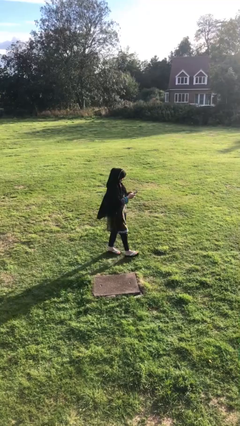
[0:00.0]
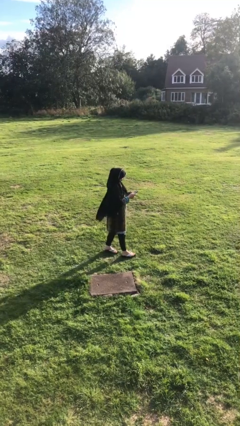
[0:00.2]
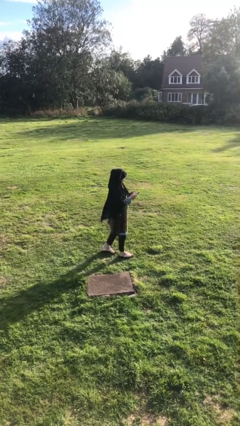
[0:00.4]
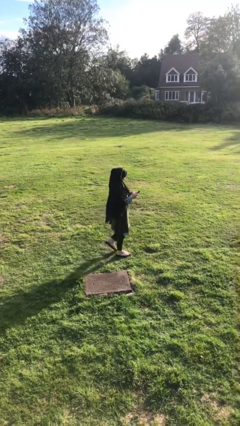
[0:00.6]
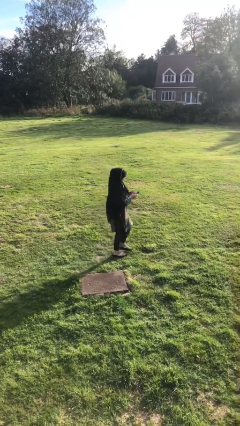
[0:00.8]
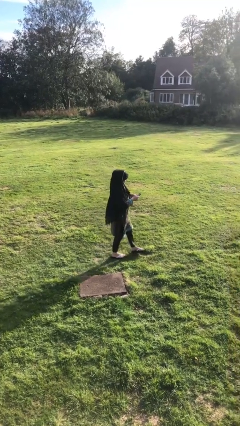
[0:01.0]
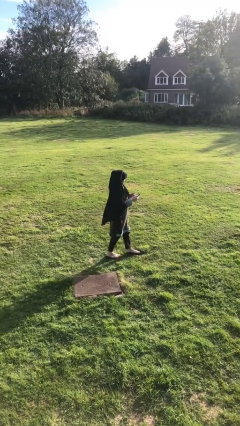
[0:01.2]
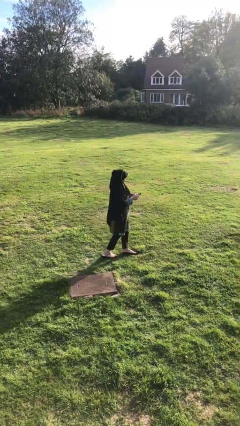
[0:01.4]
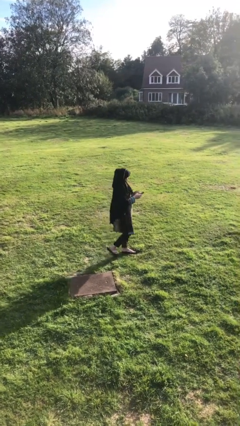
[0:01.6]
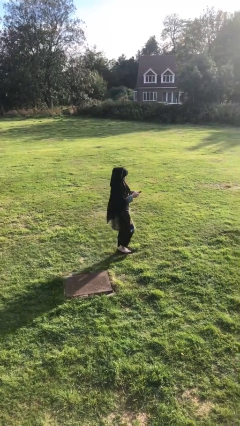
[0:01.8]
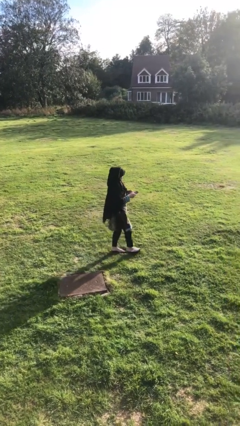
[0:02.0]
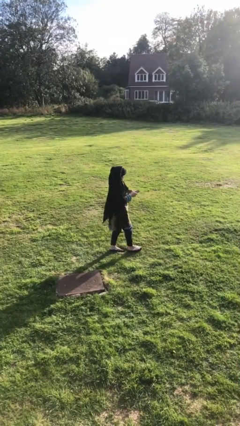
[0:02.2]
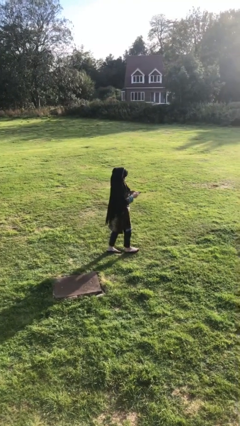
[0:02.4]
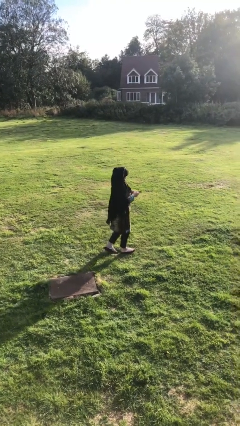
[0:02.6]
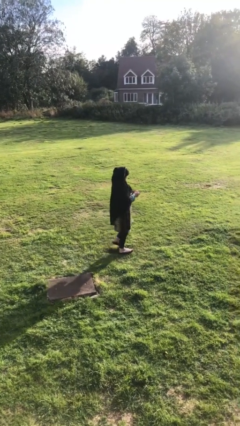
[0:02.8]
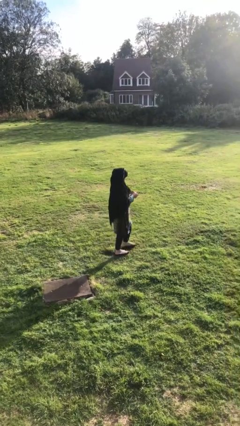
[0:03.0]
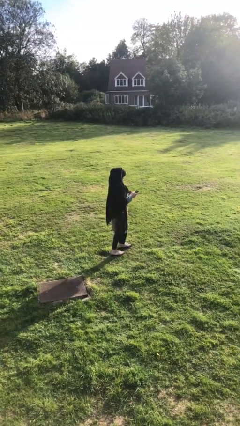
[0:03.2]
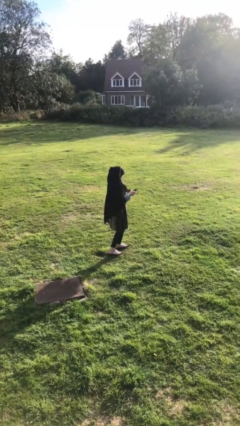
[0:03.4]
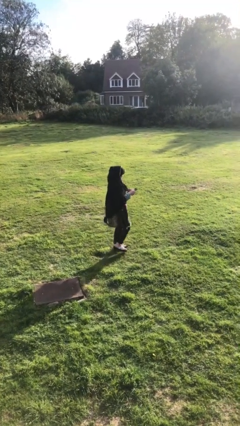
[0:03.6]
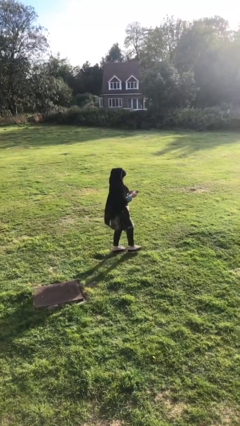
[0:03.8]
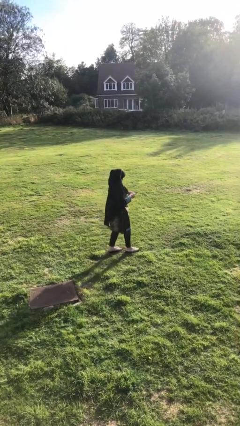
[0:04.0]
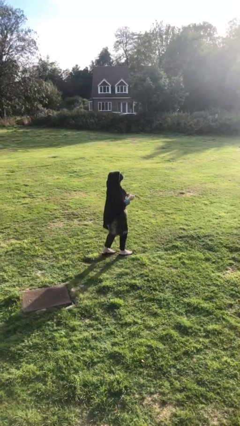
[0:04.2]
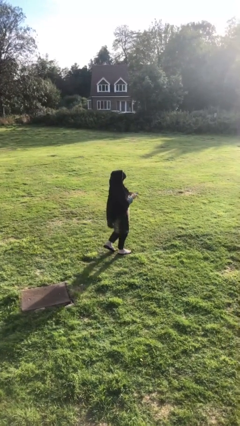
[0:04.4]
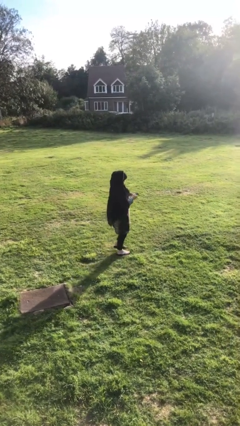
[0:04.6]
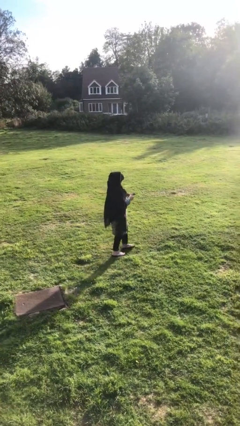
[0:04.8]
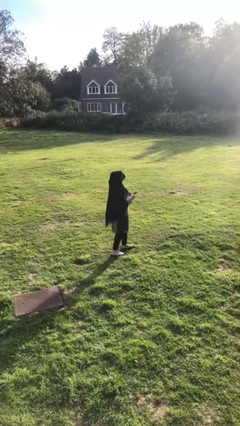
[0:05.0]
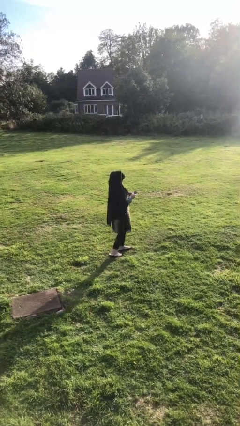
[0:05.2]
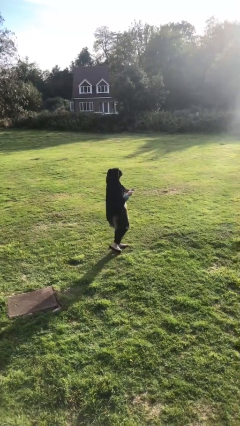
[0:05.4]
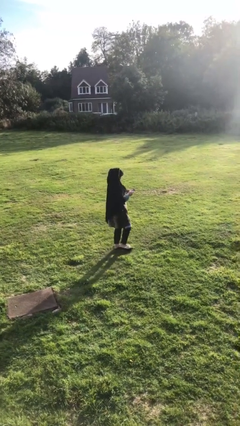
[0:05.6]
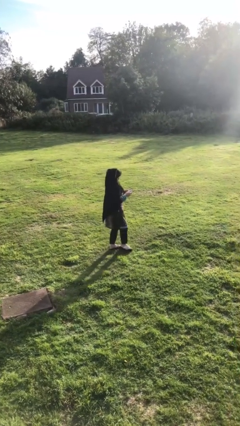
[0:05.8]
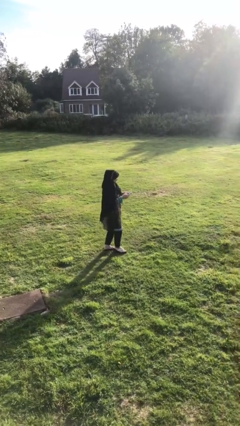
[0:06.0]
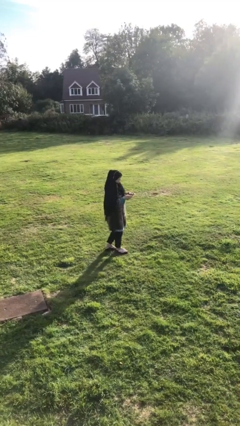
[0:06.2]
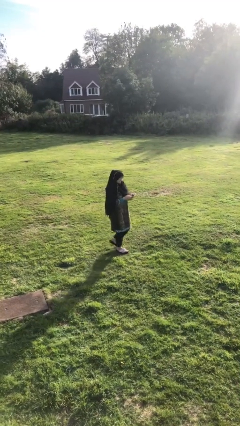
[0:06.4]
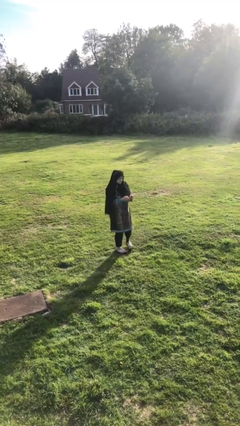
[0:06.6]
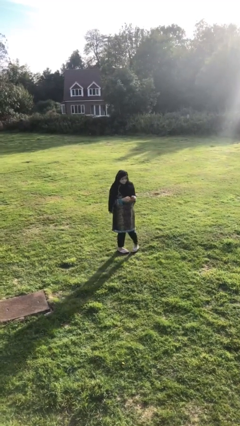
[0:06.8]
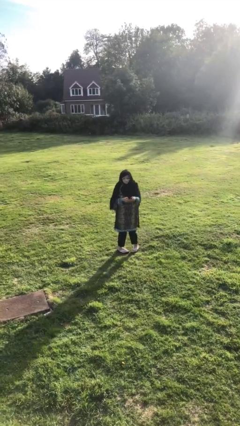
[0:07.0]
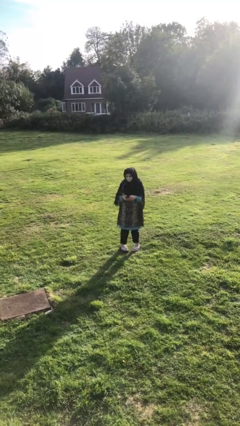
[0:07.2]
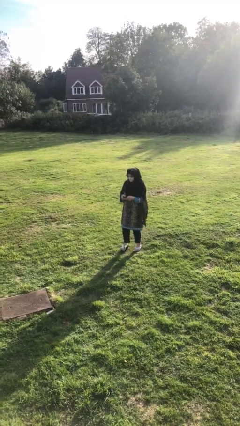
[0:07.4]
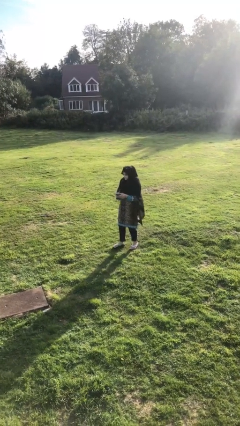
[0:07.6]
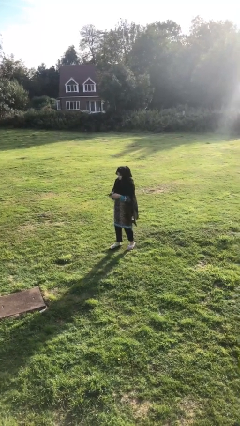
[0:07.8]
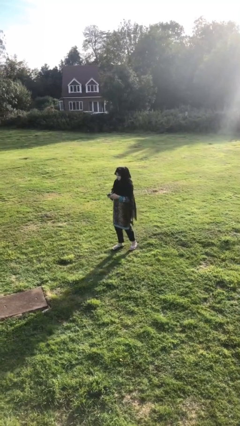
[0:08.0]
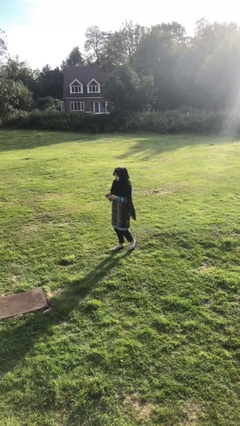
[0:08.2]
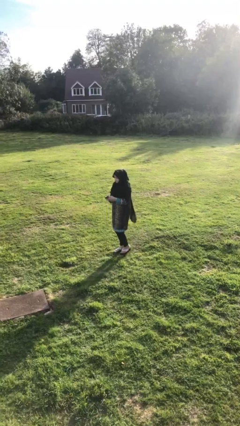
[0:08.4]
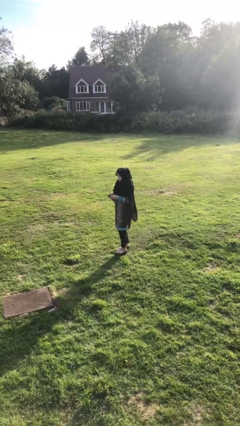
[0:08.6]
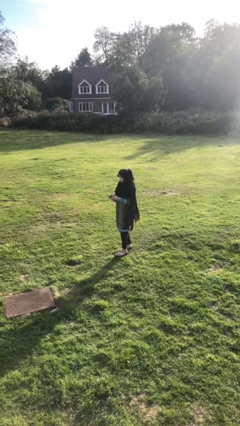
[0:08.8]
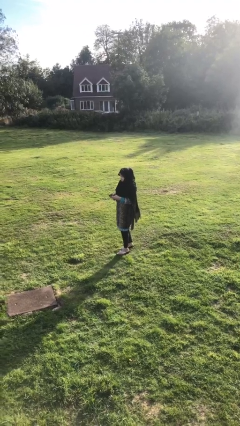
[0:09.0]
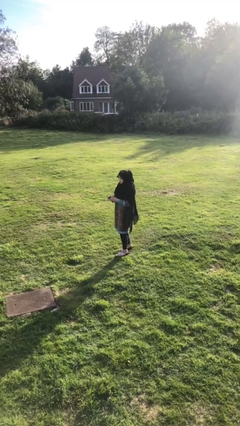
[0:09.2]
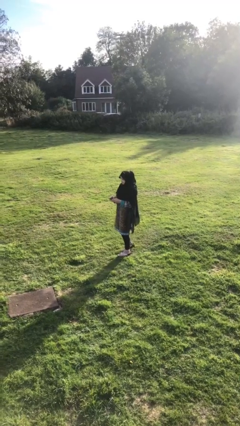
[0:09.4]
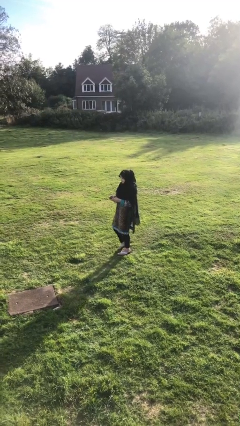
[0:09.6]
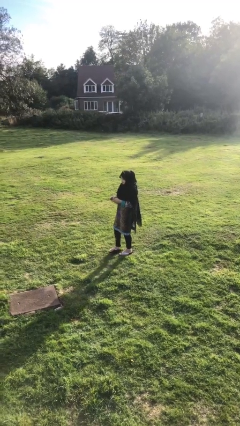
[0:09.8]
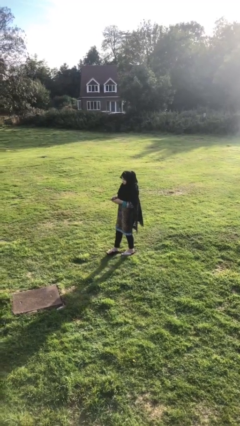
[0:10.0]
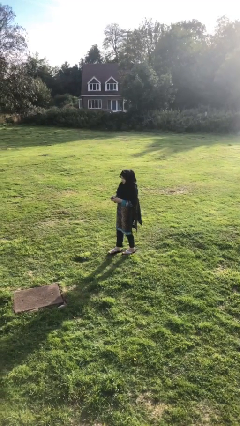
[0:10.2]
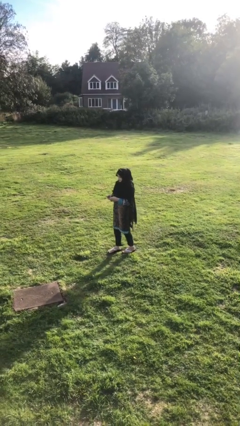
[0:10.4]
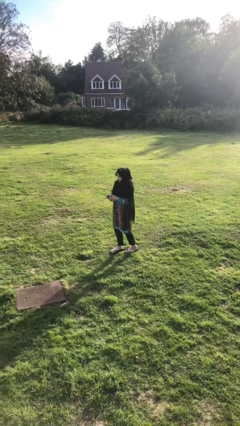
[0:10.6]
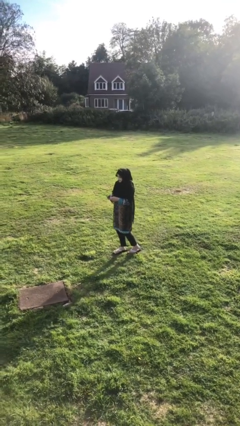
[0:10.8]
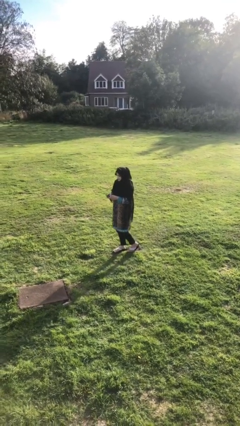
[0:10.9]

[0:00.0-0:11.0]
person texts on phone

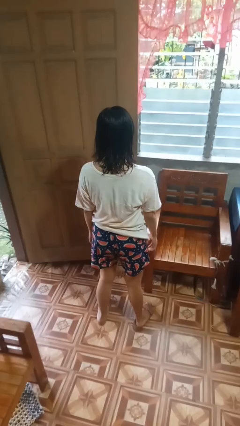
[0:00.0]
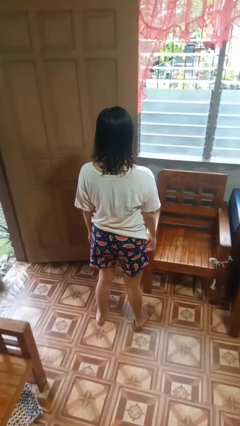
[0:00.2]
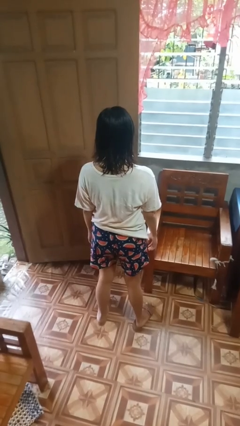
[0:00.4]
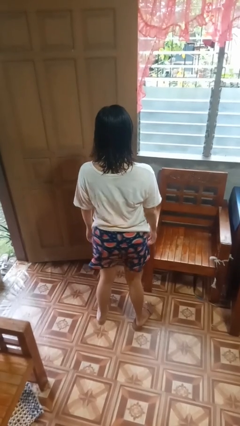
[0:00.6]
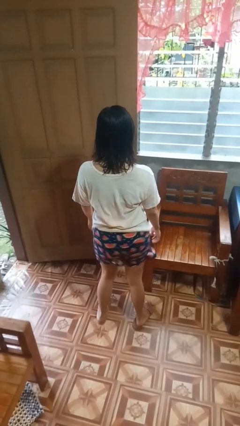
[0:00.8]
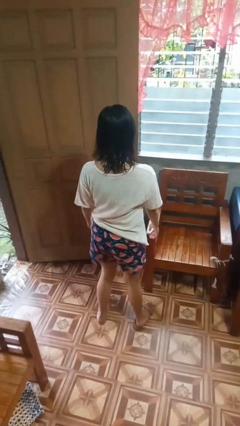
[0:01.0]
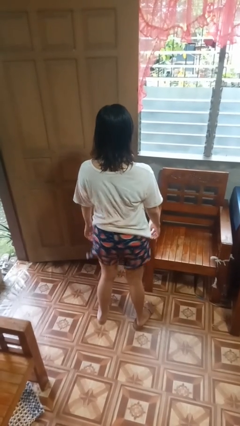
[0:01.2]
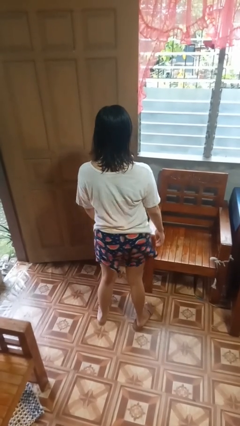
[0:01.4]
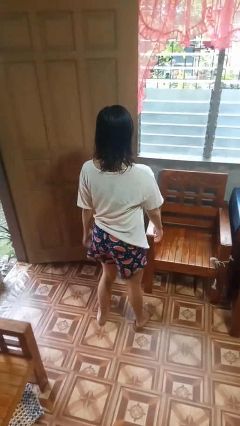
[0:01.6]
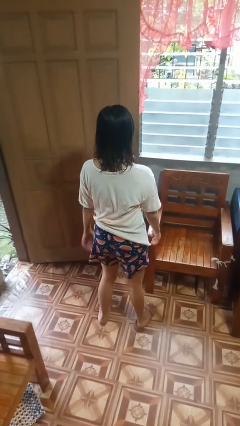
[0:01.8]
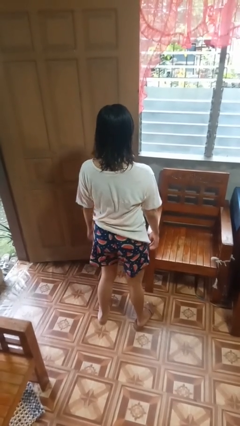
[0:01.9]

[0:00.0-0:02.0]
person wiggles hips

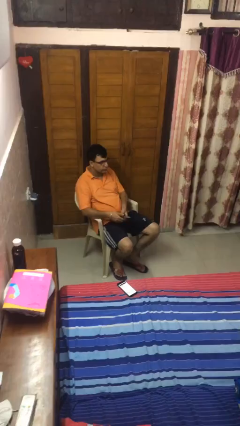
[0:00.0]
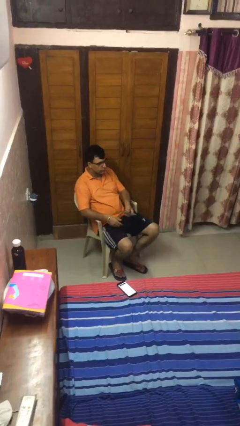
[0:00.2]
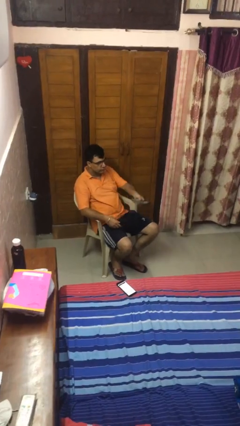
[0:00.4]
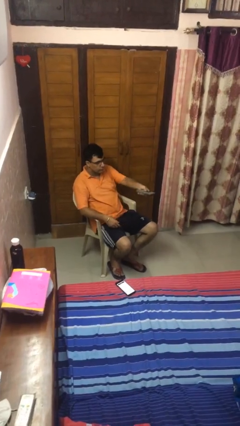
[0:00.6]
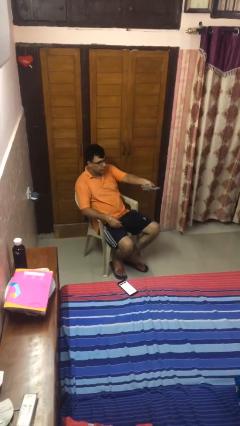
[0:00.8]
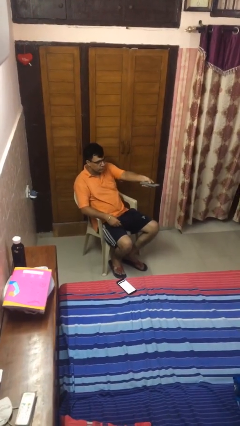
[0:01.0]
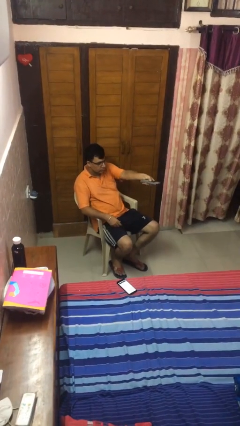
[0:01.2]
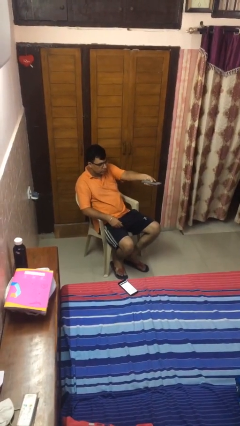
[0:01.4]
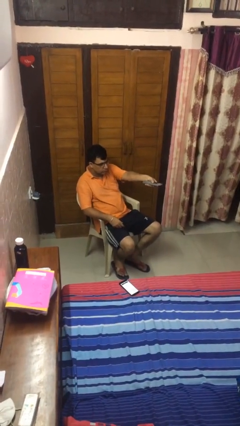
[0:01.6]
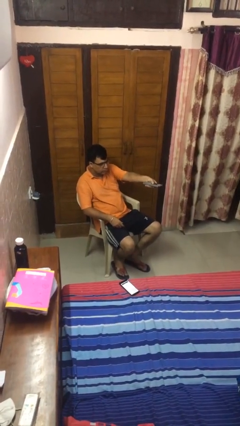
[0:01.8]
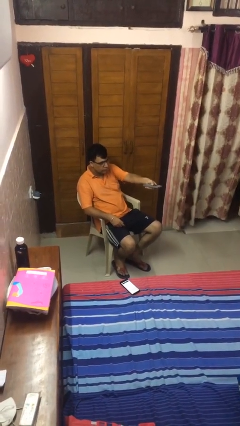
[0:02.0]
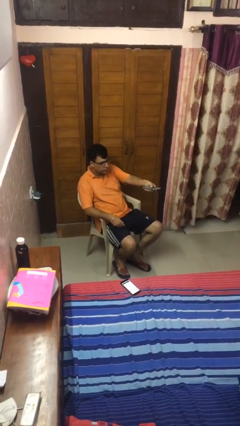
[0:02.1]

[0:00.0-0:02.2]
person uses television remote

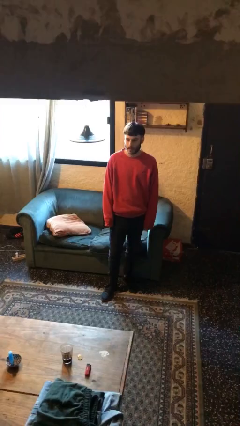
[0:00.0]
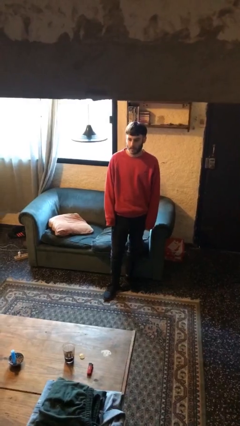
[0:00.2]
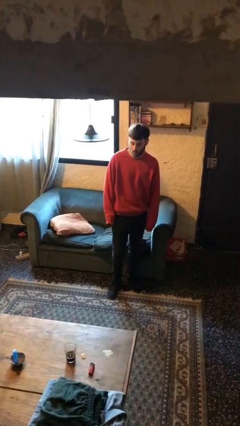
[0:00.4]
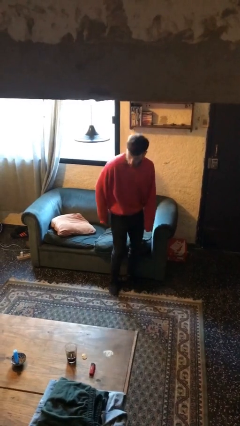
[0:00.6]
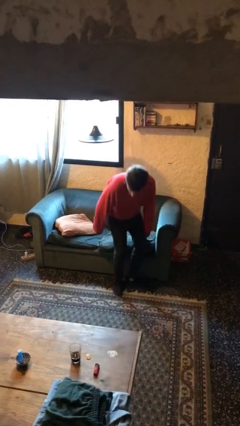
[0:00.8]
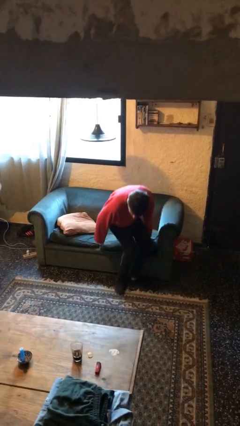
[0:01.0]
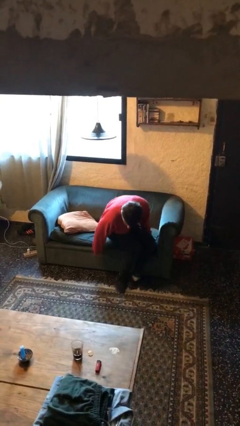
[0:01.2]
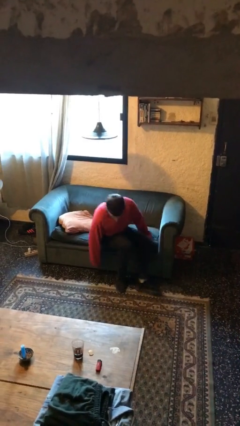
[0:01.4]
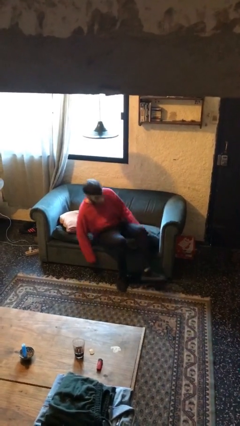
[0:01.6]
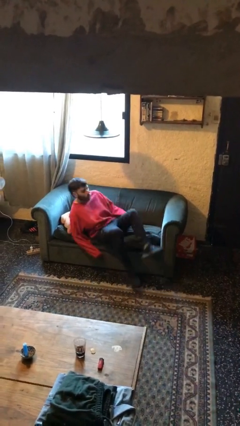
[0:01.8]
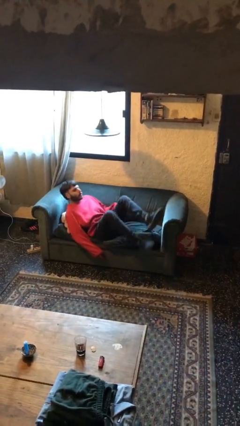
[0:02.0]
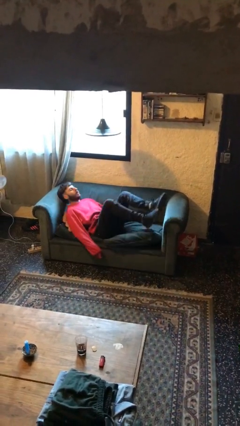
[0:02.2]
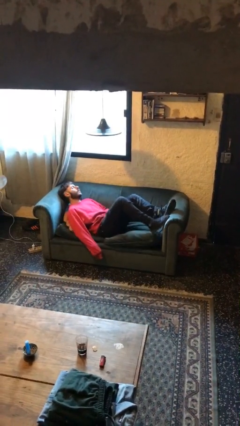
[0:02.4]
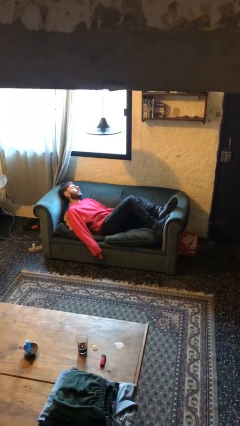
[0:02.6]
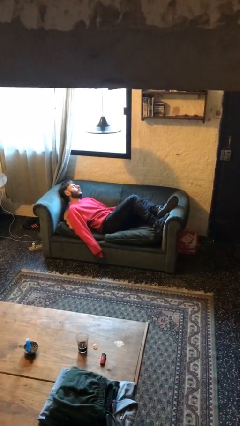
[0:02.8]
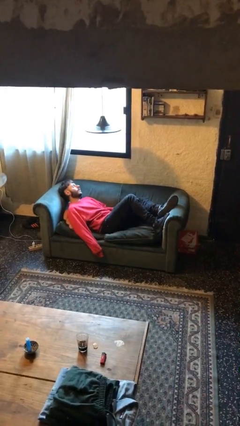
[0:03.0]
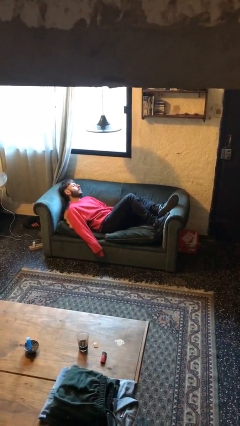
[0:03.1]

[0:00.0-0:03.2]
person lies down on couch
